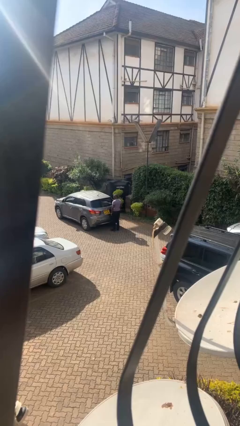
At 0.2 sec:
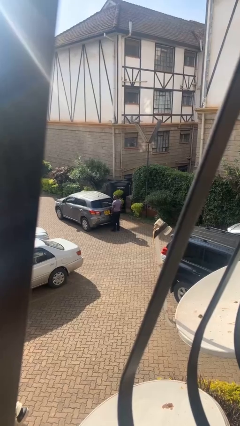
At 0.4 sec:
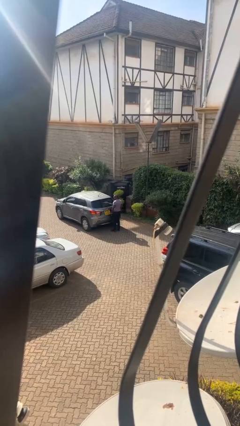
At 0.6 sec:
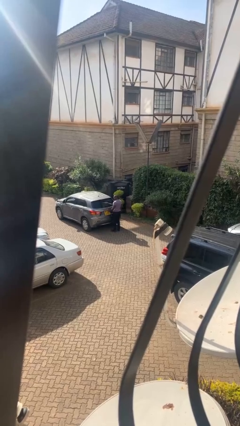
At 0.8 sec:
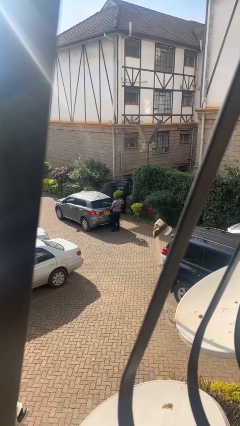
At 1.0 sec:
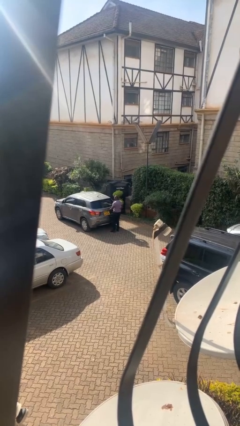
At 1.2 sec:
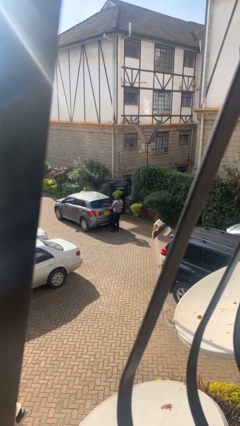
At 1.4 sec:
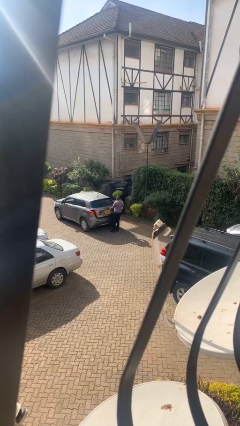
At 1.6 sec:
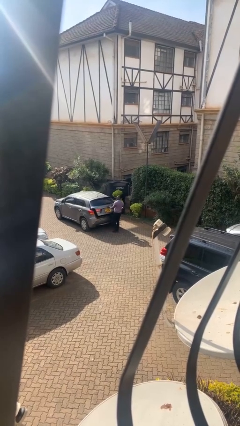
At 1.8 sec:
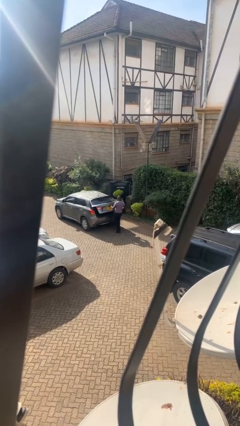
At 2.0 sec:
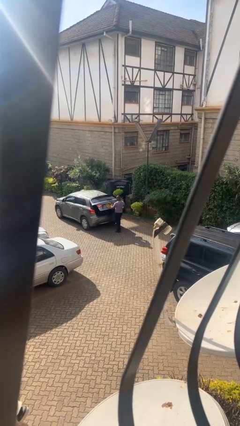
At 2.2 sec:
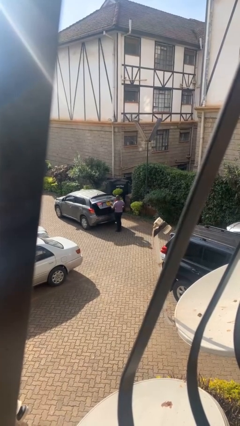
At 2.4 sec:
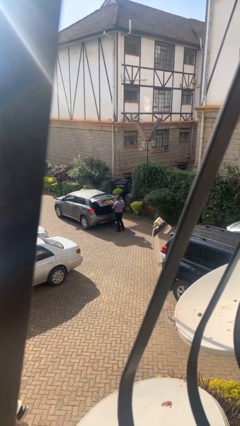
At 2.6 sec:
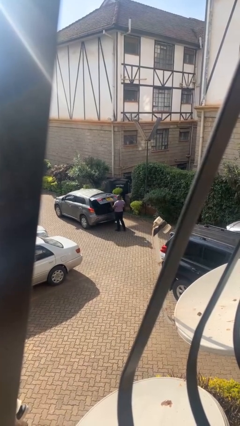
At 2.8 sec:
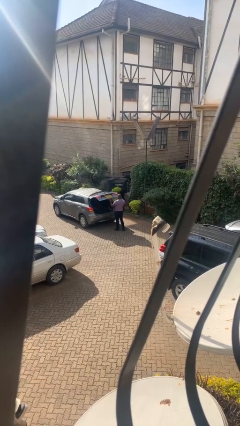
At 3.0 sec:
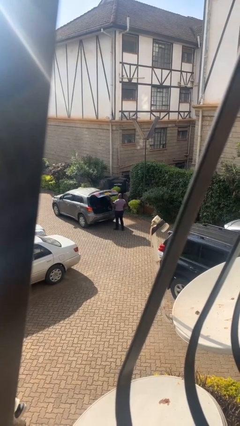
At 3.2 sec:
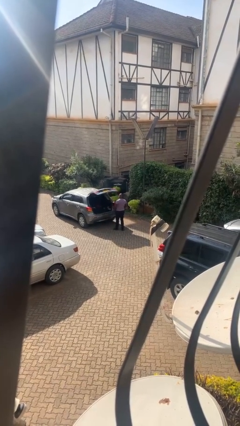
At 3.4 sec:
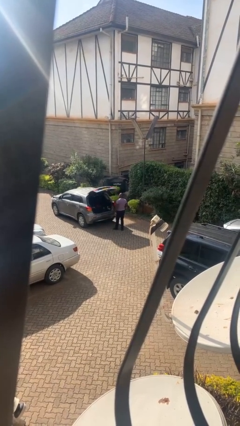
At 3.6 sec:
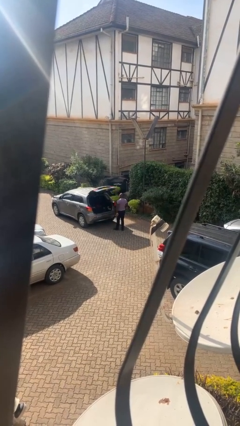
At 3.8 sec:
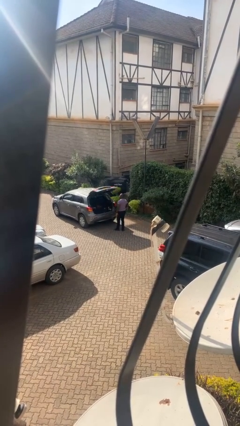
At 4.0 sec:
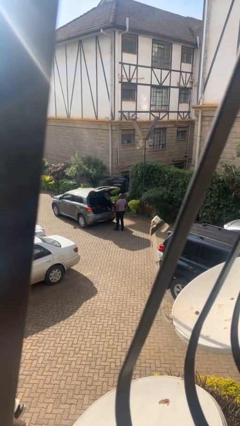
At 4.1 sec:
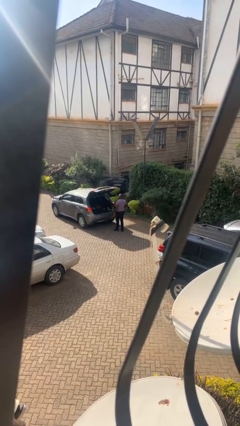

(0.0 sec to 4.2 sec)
person opens car trunk

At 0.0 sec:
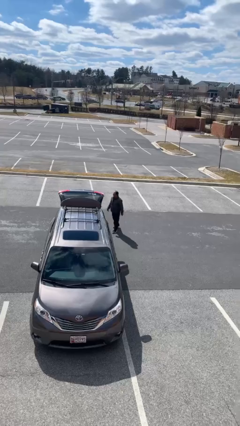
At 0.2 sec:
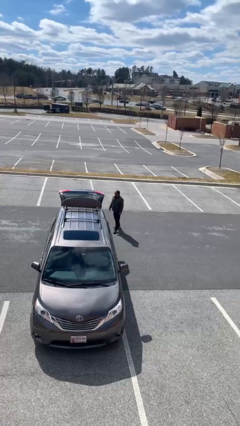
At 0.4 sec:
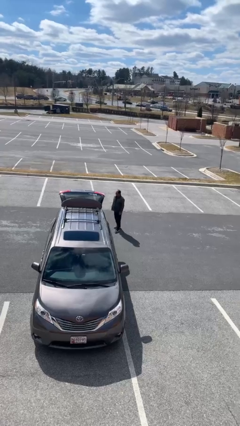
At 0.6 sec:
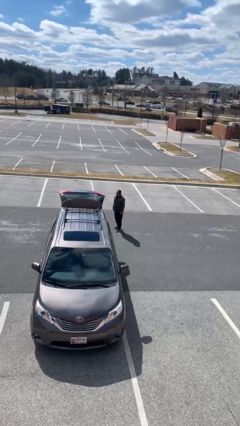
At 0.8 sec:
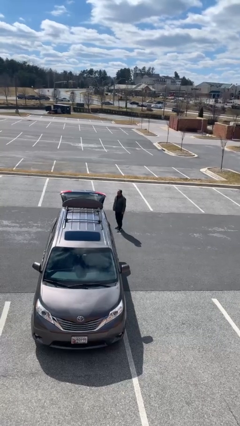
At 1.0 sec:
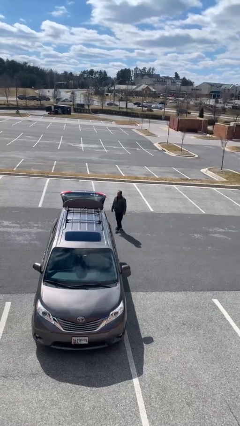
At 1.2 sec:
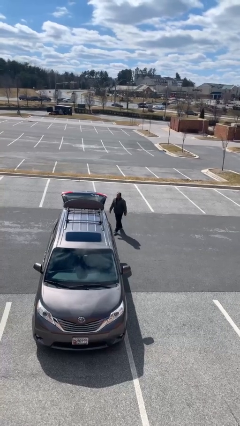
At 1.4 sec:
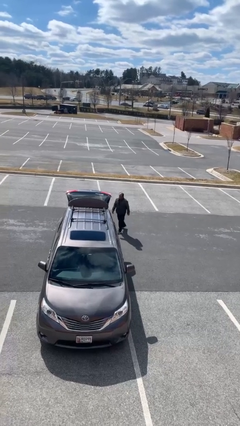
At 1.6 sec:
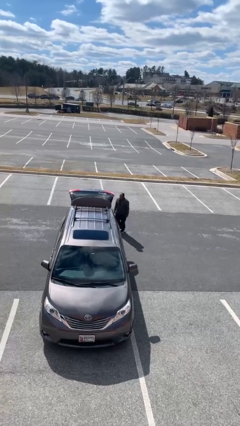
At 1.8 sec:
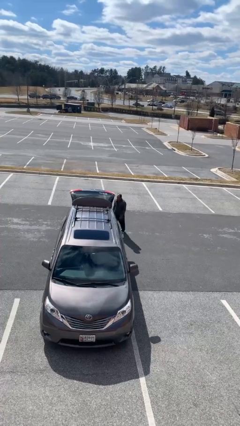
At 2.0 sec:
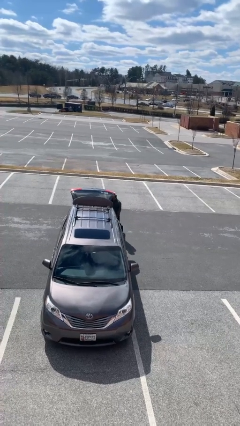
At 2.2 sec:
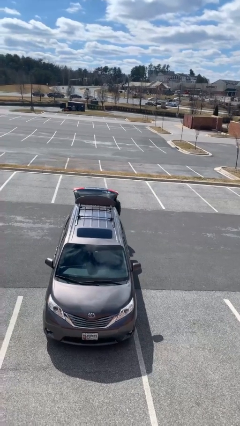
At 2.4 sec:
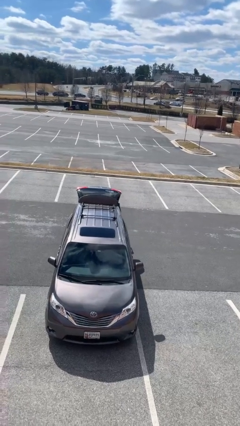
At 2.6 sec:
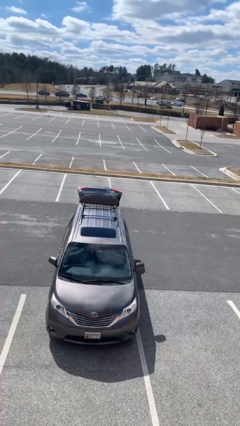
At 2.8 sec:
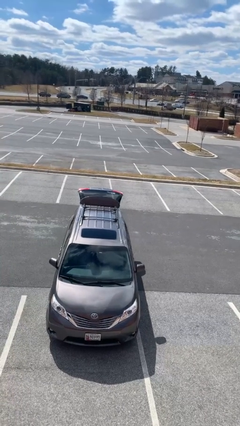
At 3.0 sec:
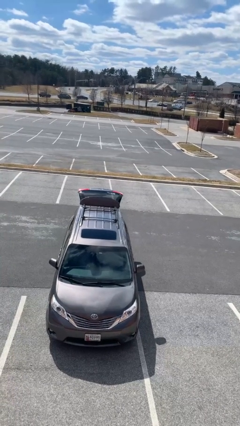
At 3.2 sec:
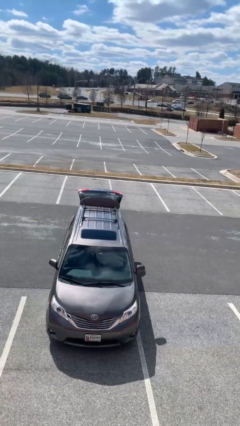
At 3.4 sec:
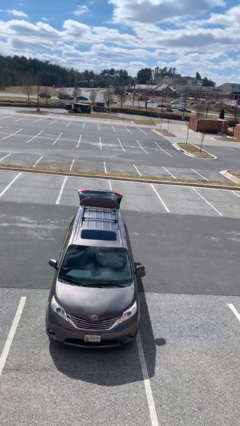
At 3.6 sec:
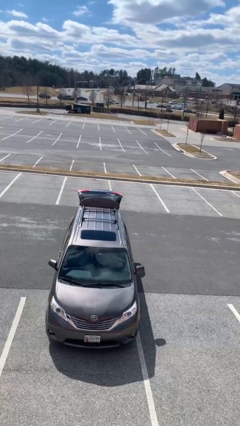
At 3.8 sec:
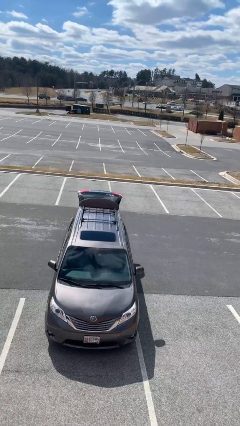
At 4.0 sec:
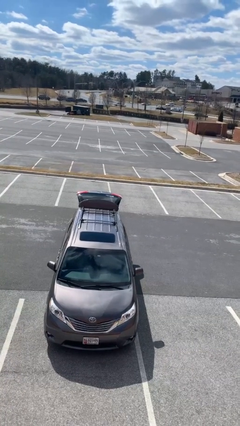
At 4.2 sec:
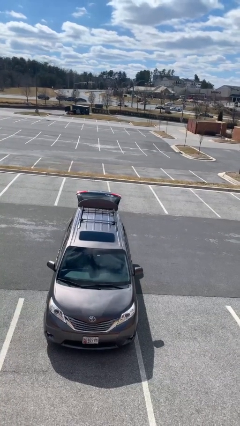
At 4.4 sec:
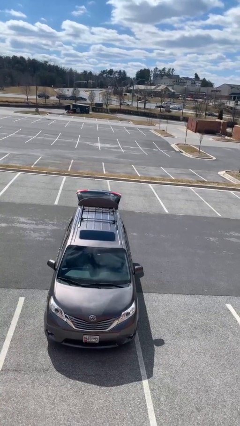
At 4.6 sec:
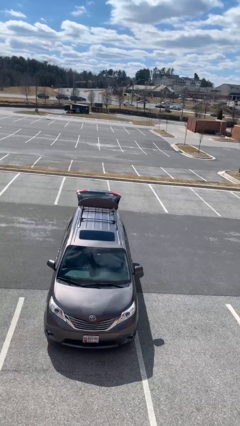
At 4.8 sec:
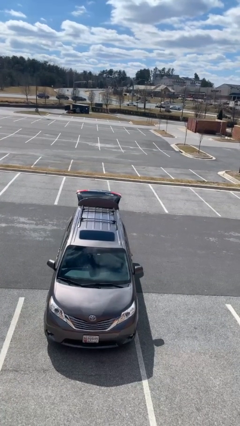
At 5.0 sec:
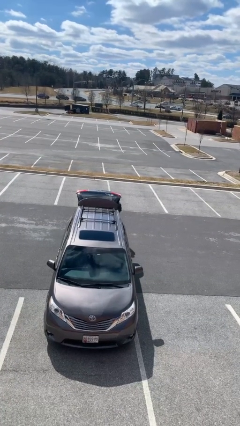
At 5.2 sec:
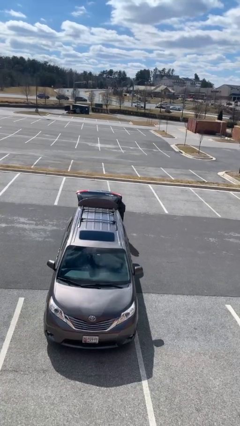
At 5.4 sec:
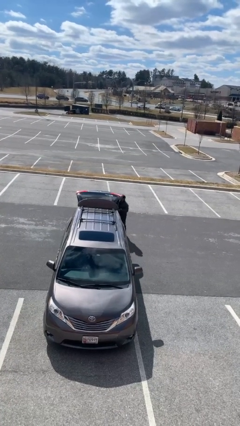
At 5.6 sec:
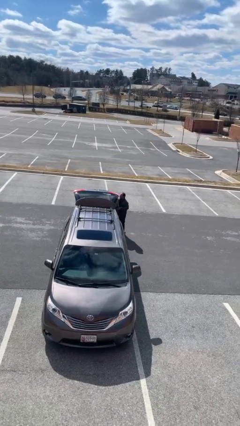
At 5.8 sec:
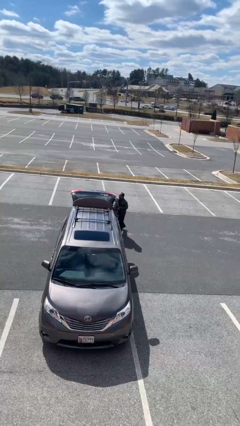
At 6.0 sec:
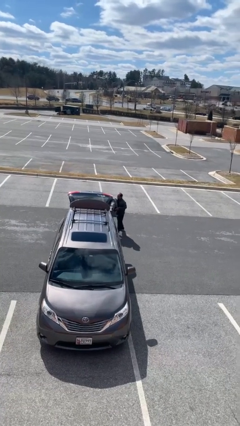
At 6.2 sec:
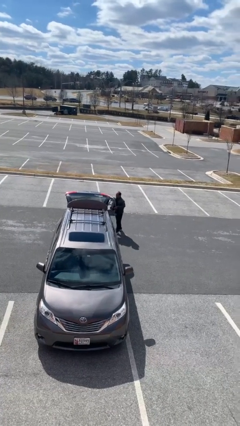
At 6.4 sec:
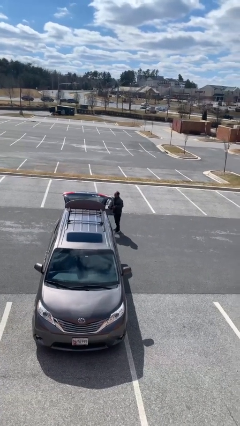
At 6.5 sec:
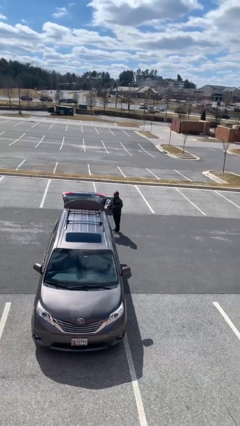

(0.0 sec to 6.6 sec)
person unloads car

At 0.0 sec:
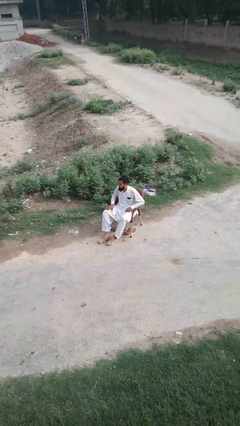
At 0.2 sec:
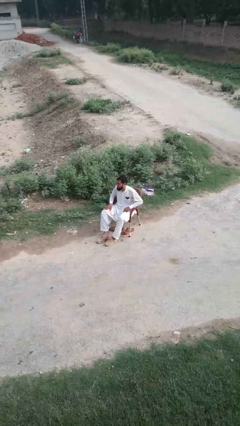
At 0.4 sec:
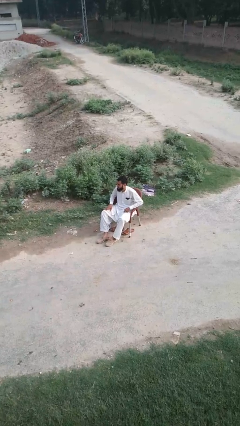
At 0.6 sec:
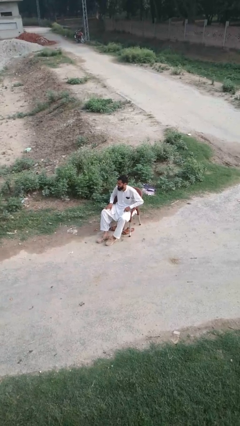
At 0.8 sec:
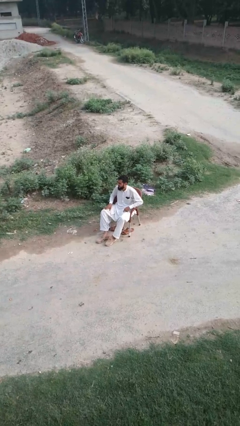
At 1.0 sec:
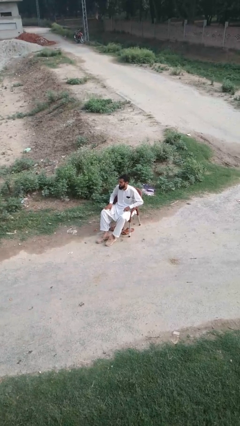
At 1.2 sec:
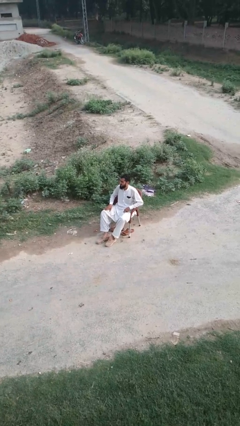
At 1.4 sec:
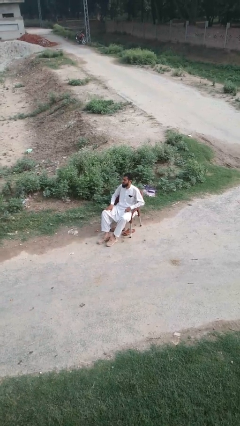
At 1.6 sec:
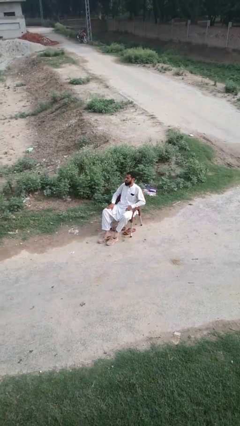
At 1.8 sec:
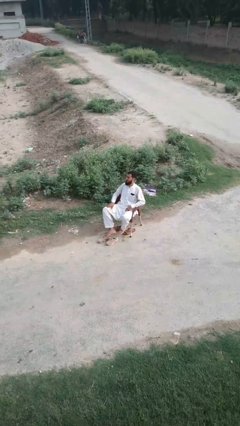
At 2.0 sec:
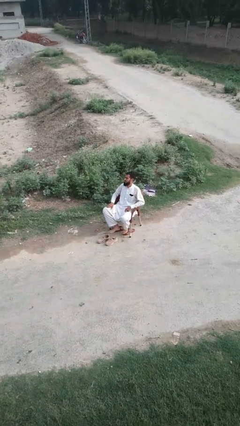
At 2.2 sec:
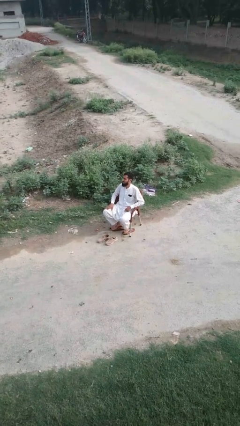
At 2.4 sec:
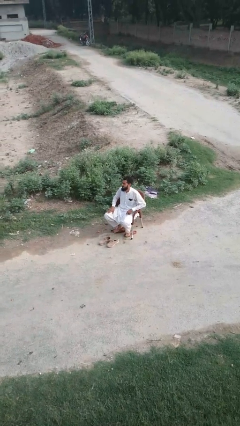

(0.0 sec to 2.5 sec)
person takes off shoes

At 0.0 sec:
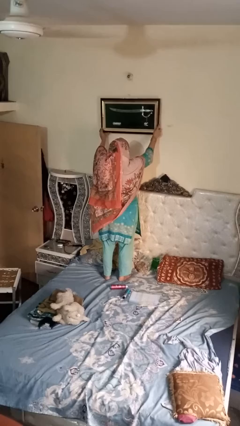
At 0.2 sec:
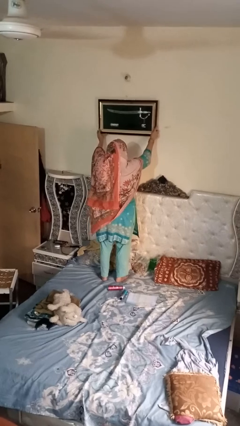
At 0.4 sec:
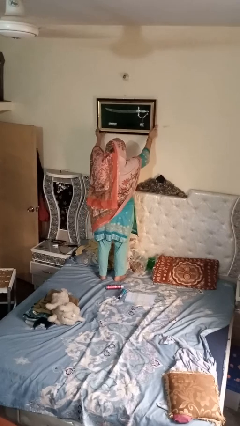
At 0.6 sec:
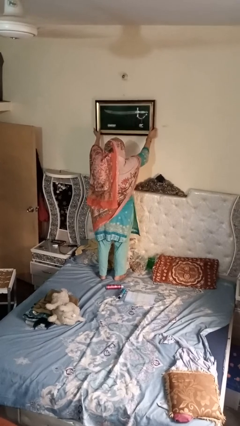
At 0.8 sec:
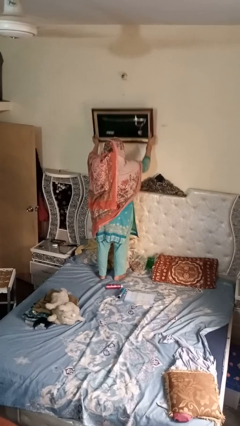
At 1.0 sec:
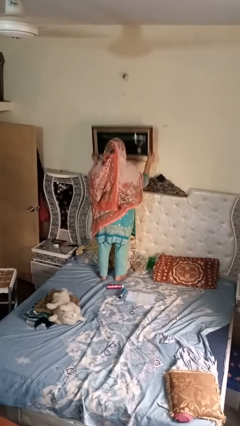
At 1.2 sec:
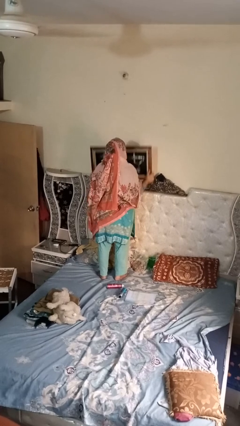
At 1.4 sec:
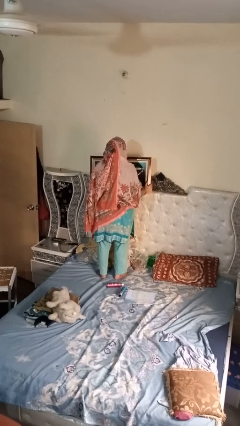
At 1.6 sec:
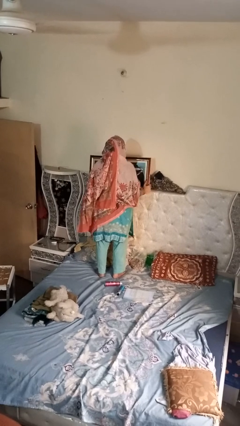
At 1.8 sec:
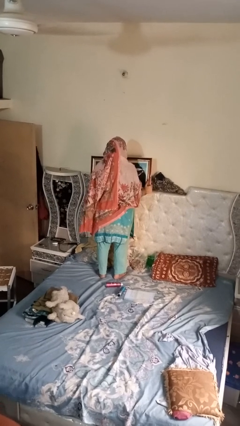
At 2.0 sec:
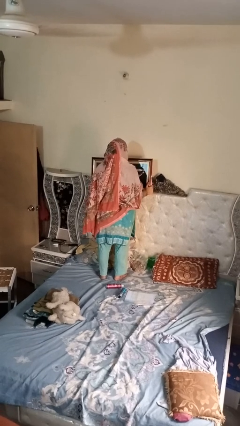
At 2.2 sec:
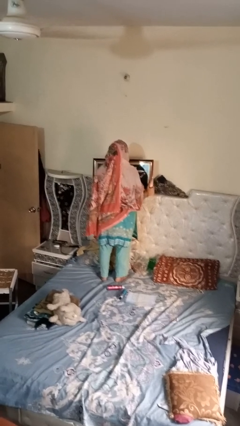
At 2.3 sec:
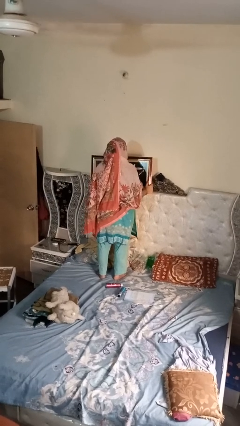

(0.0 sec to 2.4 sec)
person puts up picture frame

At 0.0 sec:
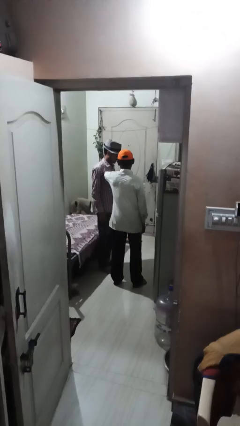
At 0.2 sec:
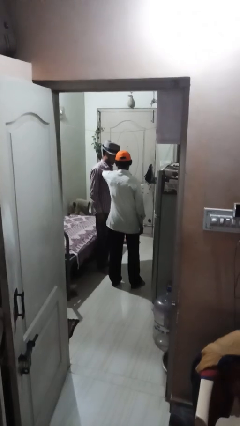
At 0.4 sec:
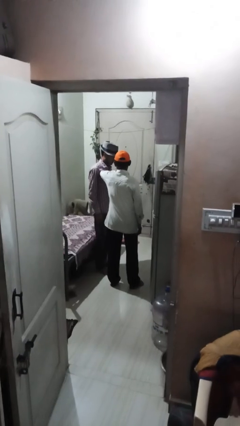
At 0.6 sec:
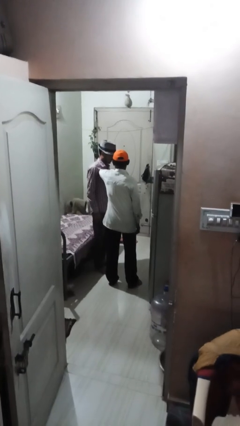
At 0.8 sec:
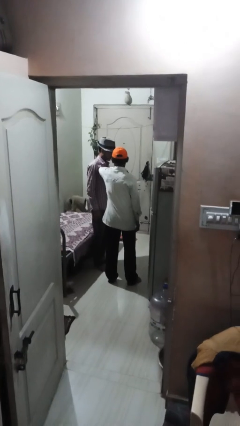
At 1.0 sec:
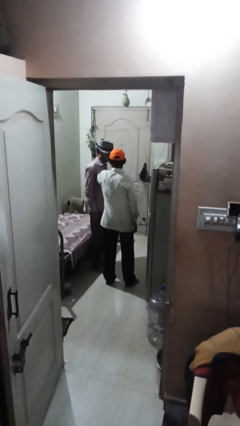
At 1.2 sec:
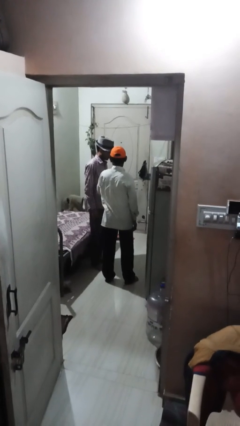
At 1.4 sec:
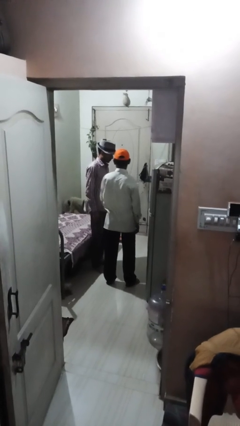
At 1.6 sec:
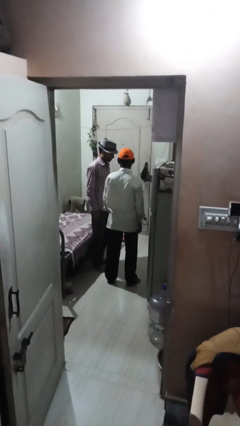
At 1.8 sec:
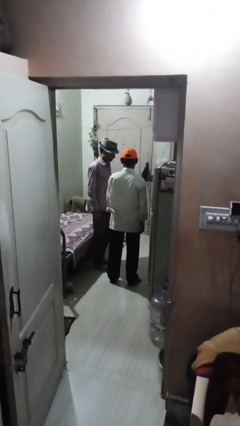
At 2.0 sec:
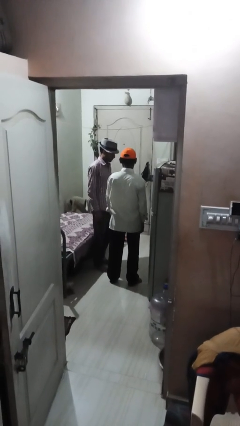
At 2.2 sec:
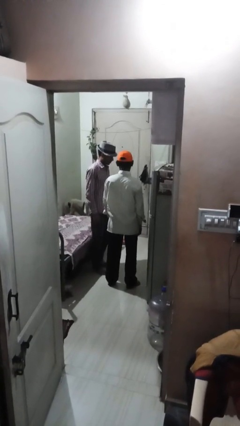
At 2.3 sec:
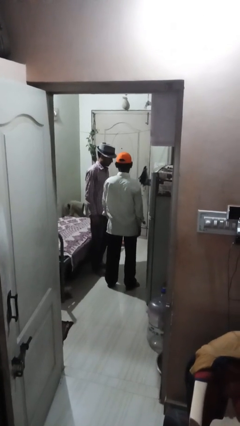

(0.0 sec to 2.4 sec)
person nudges person with elbow
